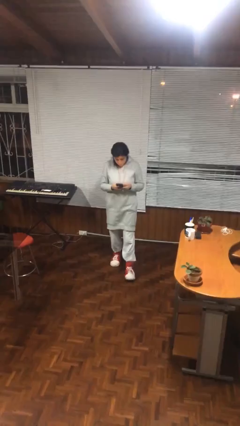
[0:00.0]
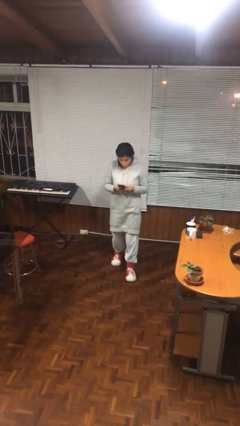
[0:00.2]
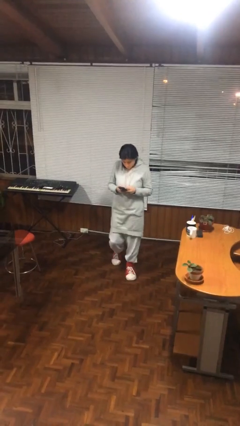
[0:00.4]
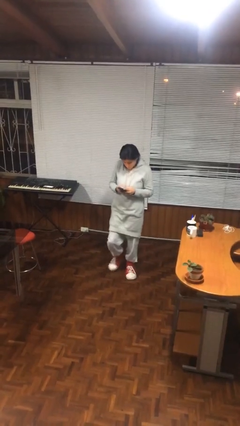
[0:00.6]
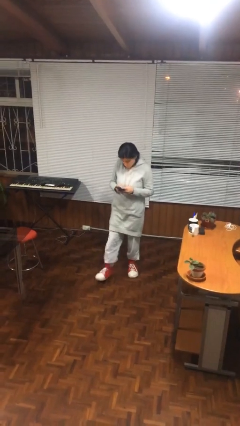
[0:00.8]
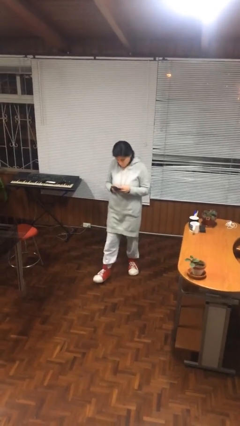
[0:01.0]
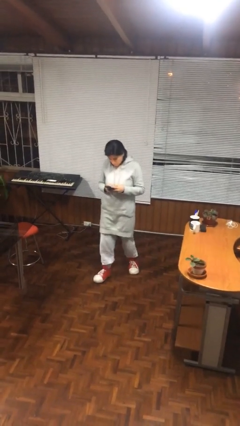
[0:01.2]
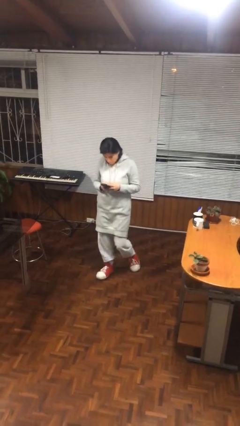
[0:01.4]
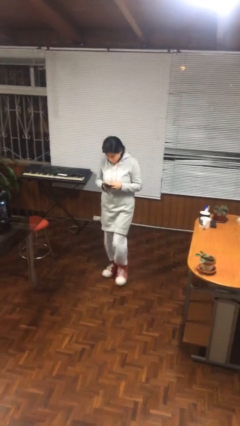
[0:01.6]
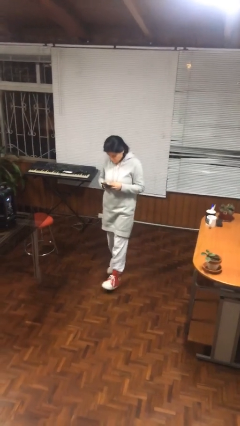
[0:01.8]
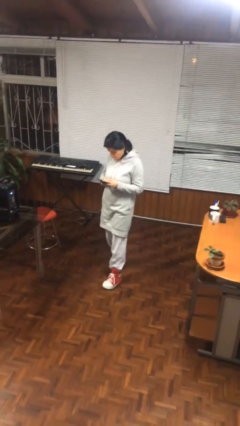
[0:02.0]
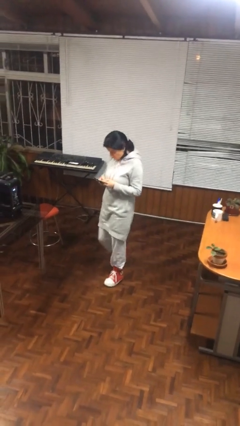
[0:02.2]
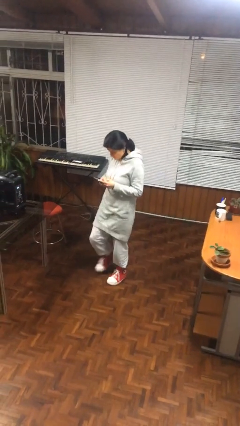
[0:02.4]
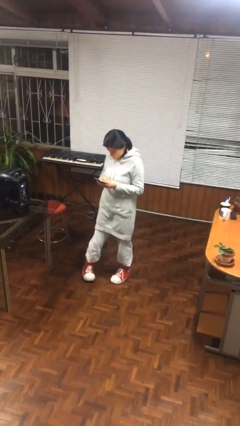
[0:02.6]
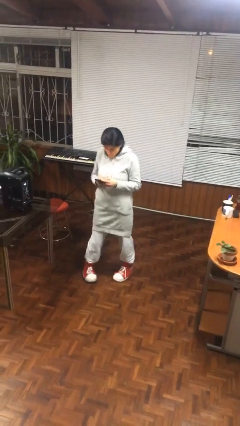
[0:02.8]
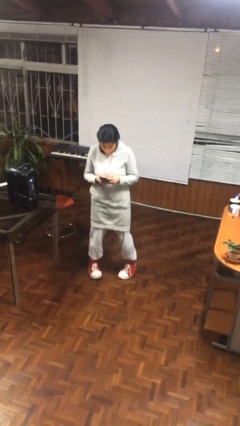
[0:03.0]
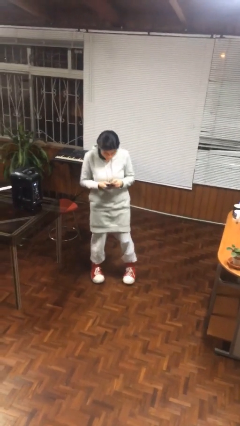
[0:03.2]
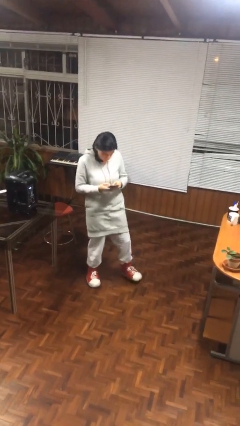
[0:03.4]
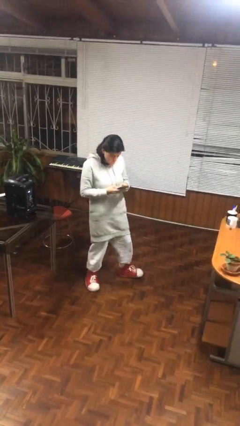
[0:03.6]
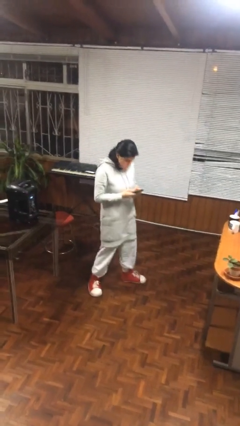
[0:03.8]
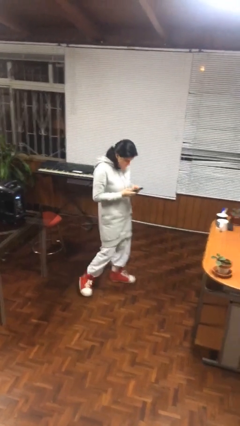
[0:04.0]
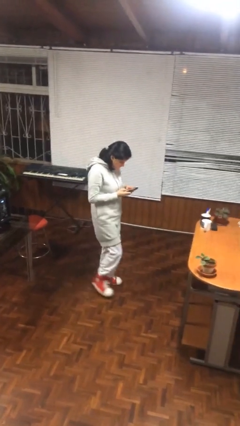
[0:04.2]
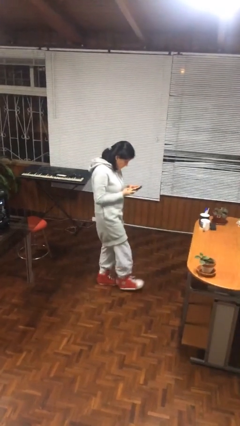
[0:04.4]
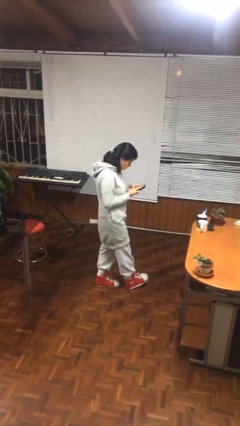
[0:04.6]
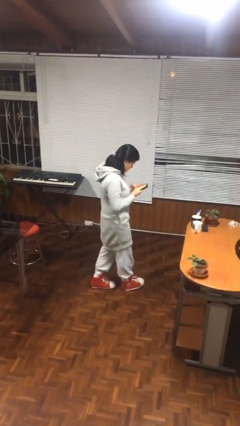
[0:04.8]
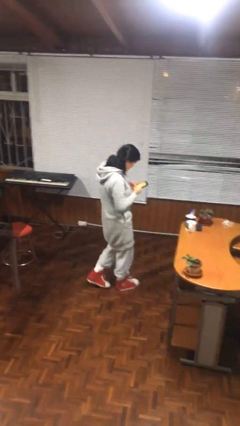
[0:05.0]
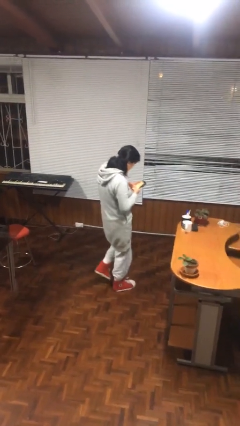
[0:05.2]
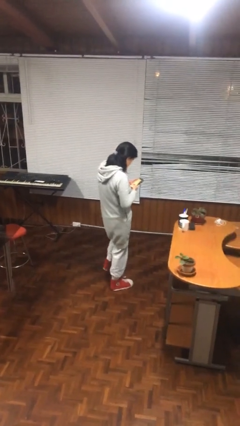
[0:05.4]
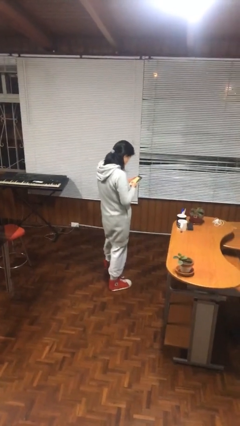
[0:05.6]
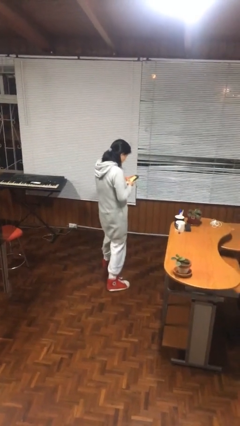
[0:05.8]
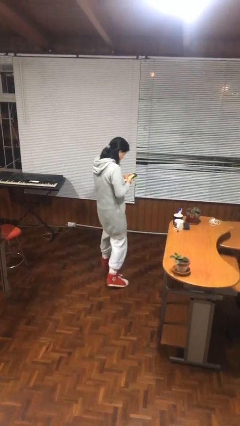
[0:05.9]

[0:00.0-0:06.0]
person texts on phone

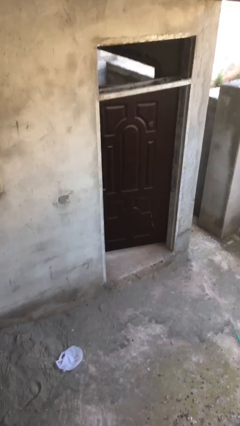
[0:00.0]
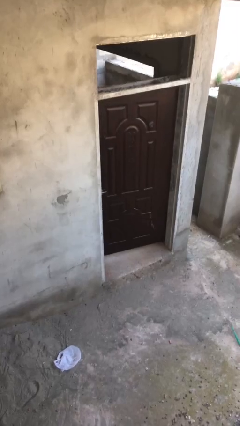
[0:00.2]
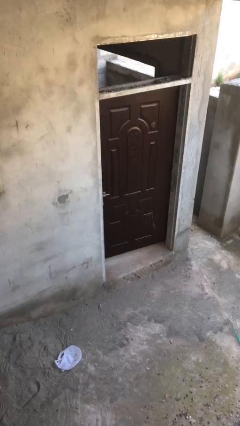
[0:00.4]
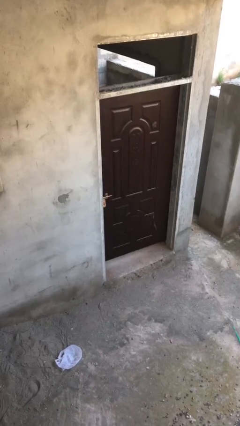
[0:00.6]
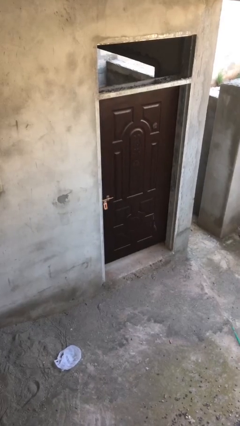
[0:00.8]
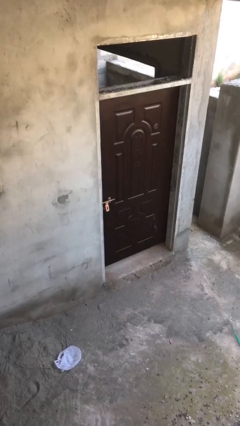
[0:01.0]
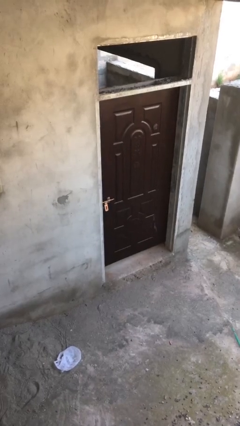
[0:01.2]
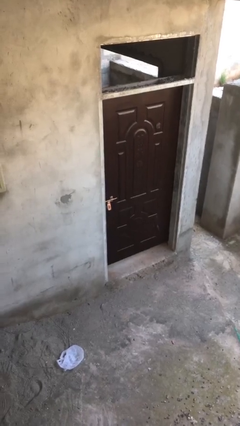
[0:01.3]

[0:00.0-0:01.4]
person closes facility door

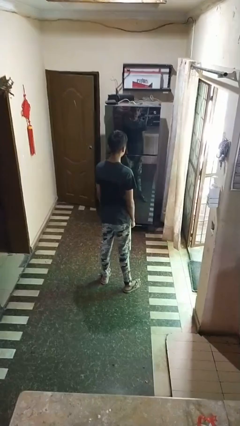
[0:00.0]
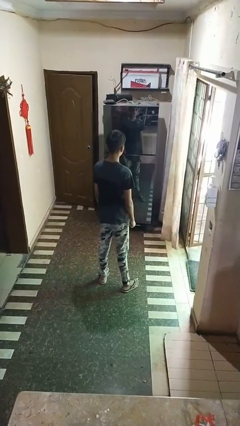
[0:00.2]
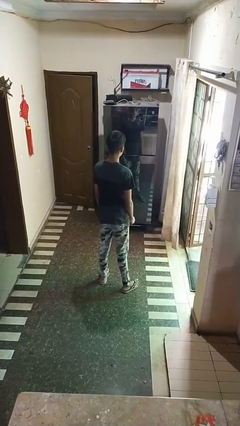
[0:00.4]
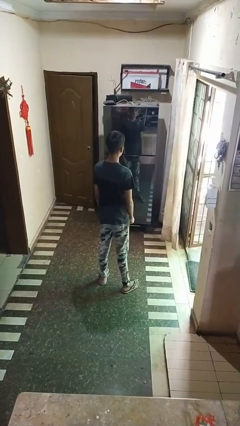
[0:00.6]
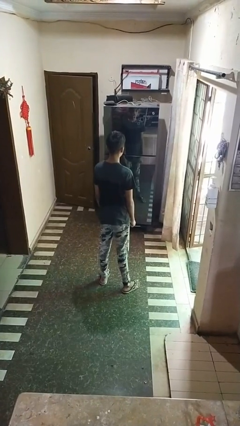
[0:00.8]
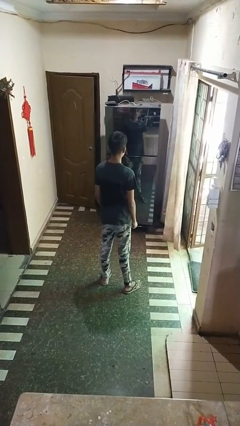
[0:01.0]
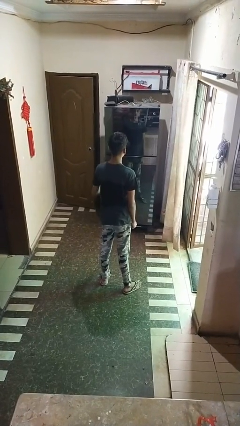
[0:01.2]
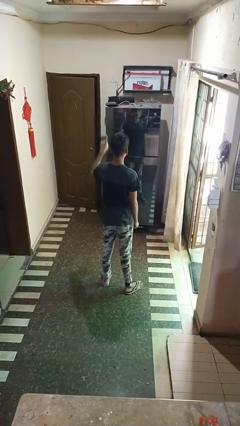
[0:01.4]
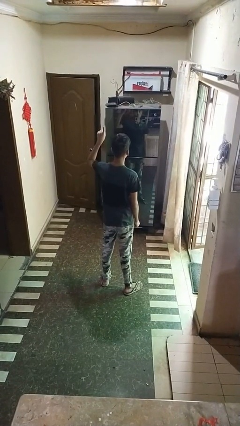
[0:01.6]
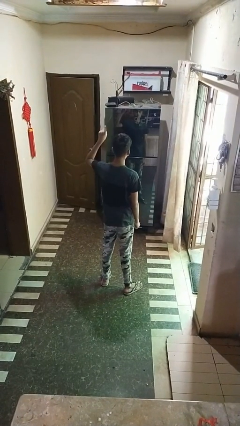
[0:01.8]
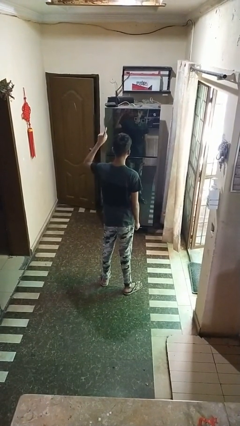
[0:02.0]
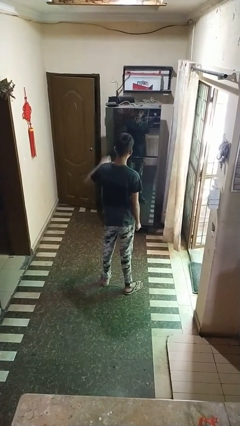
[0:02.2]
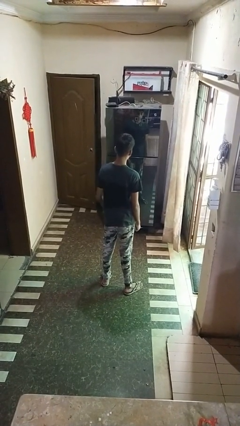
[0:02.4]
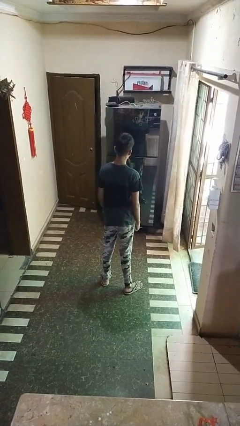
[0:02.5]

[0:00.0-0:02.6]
person gestures number one

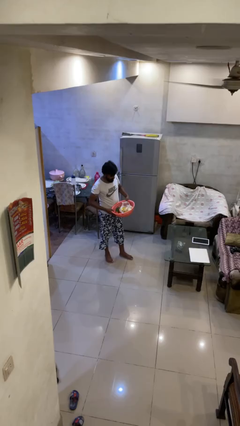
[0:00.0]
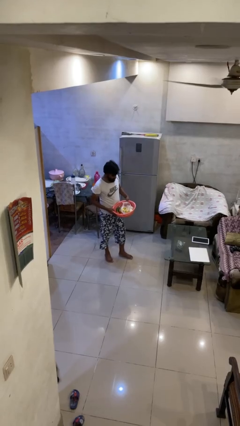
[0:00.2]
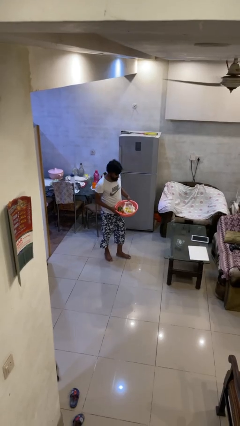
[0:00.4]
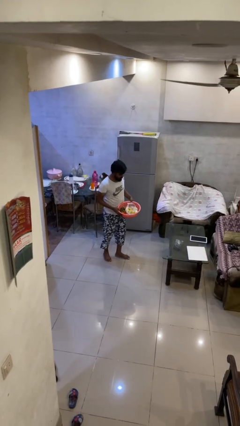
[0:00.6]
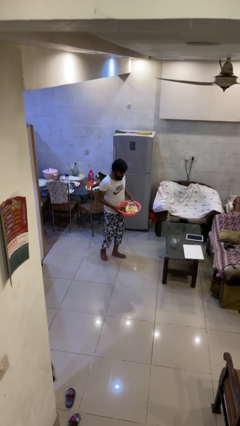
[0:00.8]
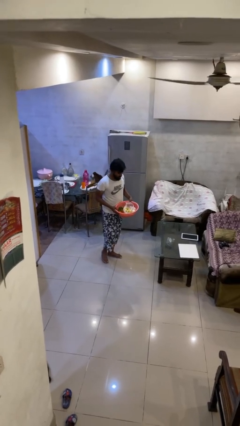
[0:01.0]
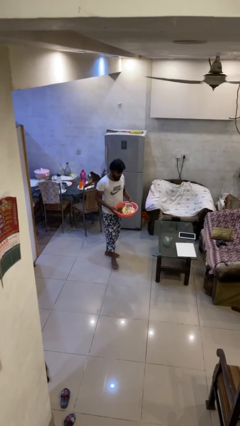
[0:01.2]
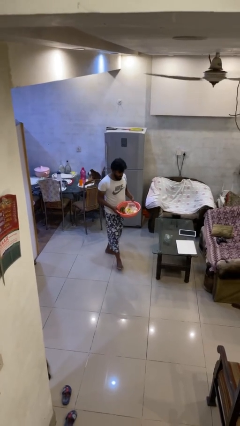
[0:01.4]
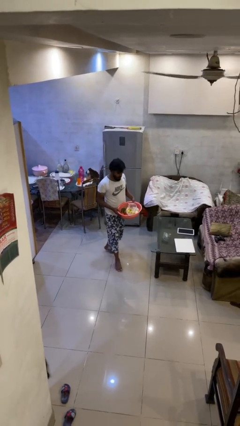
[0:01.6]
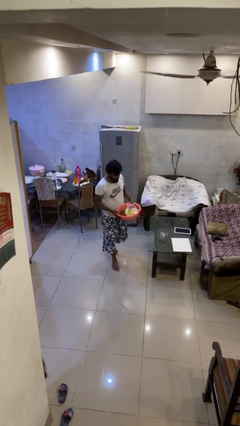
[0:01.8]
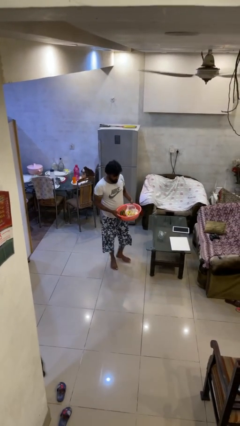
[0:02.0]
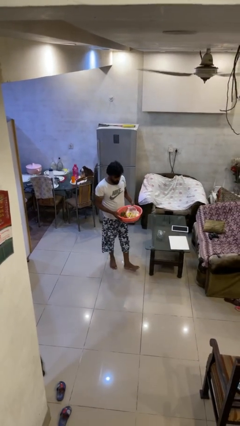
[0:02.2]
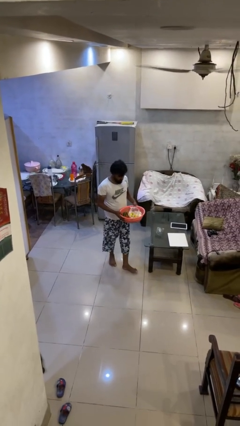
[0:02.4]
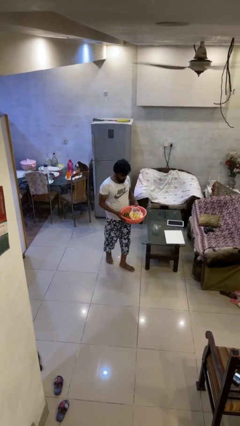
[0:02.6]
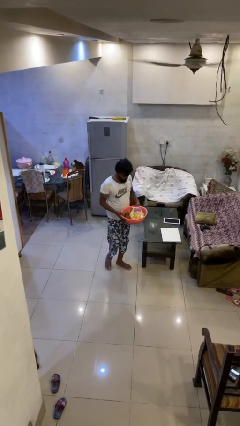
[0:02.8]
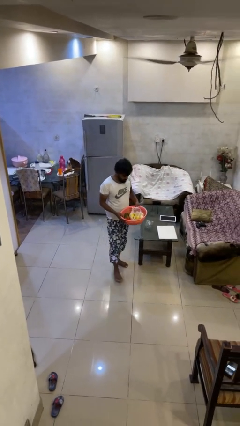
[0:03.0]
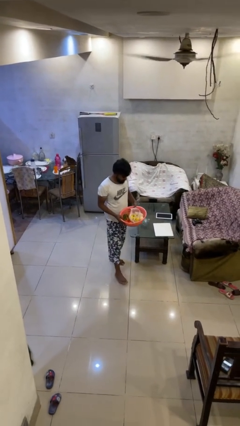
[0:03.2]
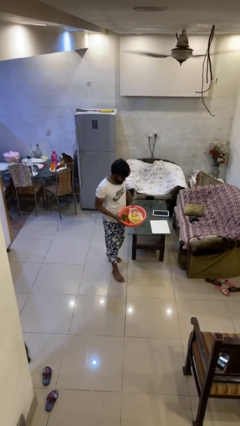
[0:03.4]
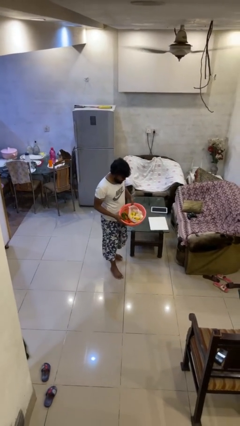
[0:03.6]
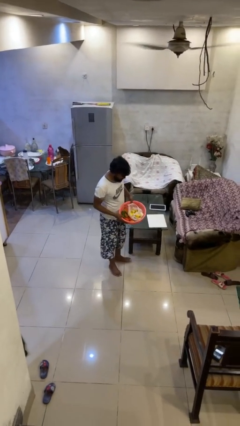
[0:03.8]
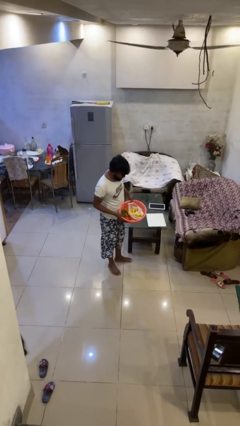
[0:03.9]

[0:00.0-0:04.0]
person carries groceries

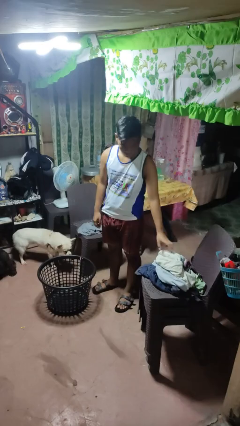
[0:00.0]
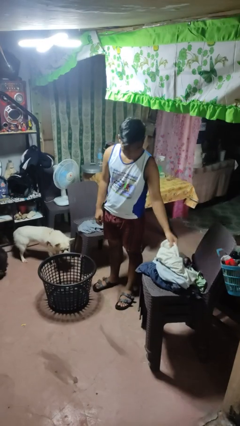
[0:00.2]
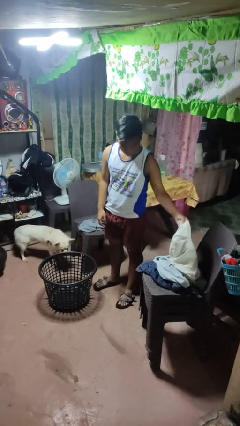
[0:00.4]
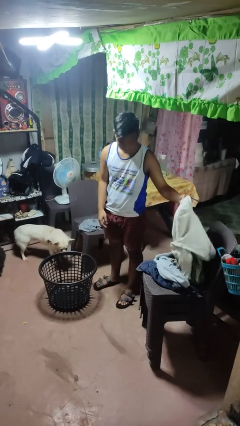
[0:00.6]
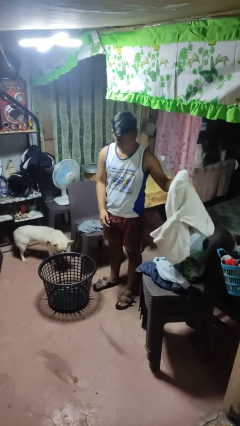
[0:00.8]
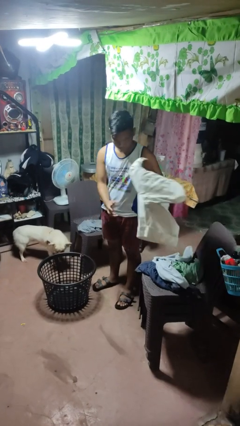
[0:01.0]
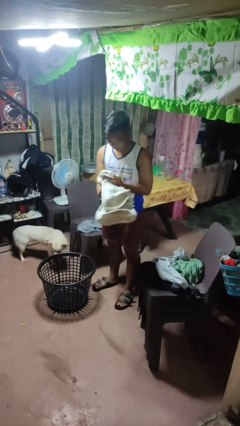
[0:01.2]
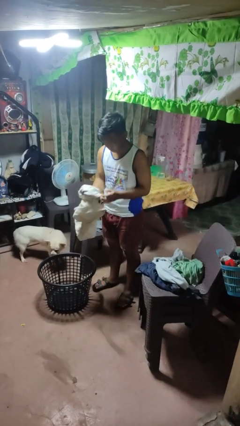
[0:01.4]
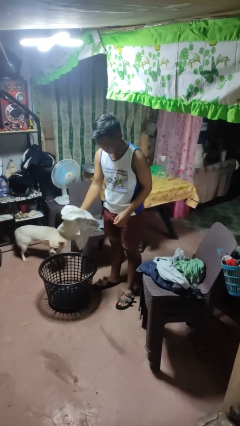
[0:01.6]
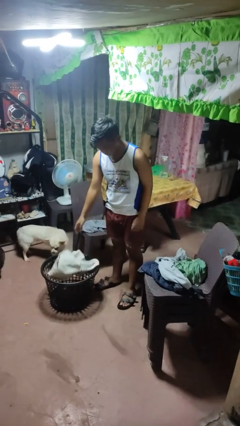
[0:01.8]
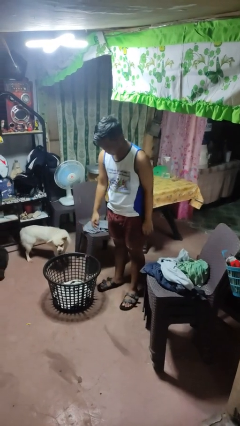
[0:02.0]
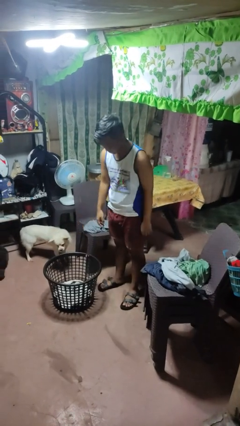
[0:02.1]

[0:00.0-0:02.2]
person puts object into basket

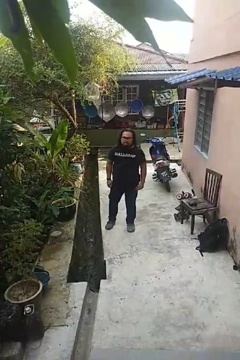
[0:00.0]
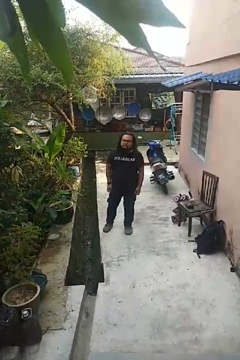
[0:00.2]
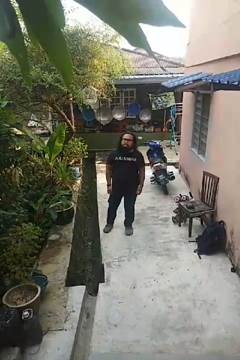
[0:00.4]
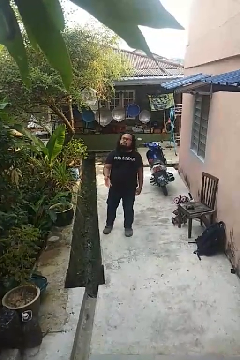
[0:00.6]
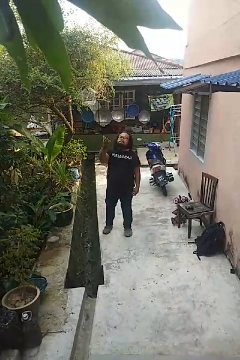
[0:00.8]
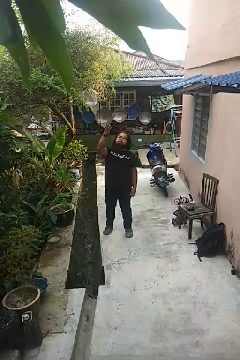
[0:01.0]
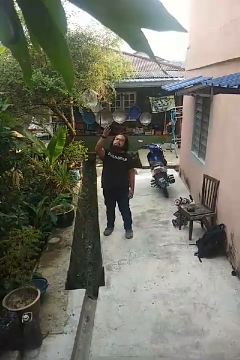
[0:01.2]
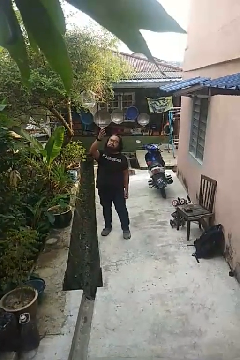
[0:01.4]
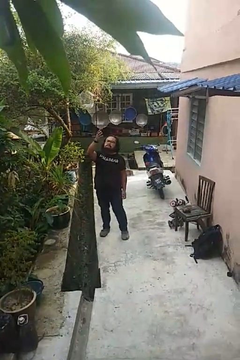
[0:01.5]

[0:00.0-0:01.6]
person gestures swipe up
